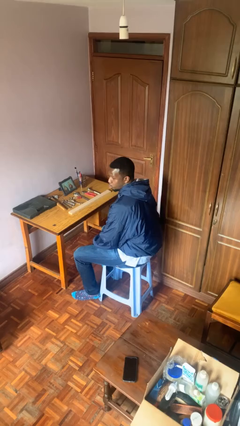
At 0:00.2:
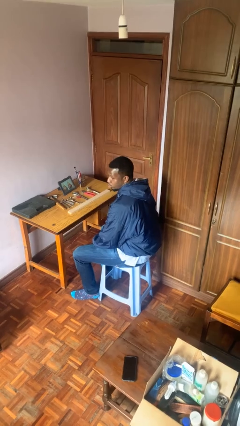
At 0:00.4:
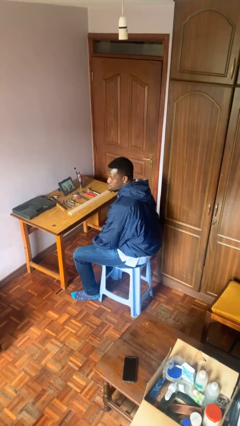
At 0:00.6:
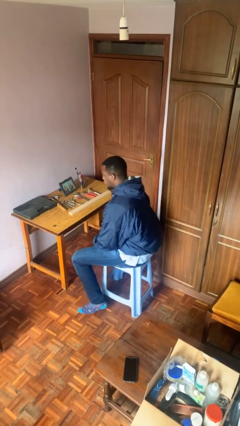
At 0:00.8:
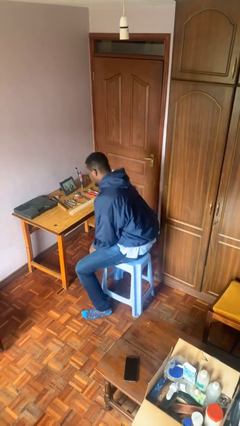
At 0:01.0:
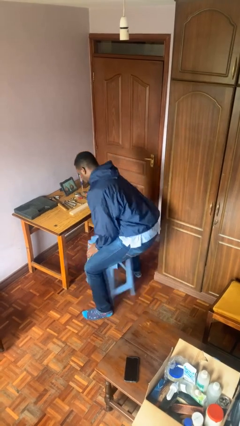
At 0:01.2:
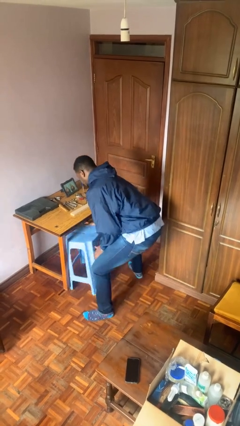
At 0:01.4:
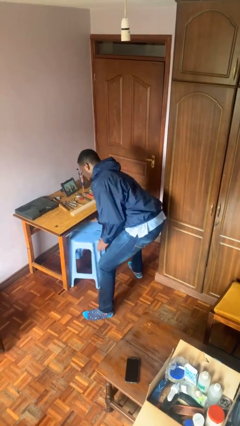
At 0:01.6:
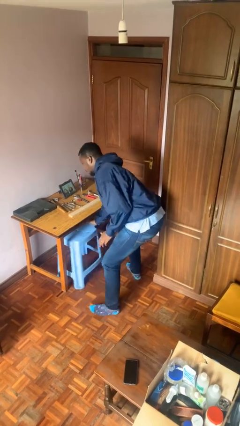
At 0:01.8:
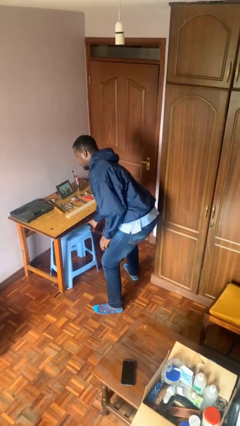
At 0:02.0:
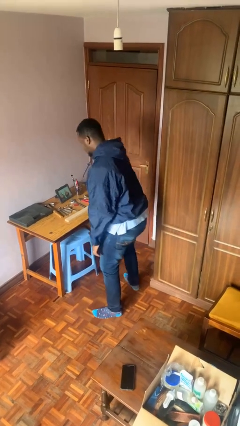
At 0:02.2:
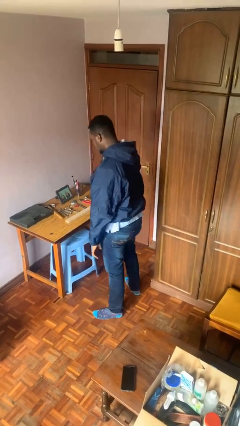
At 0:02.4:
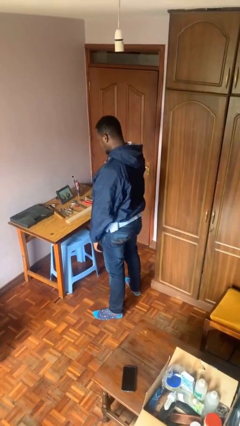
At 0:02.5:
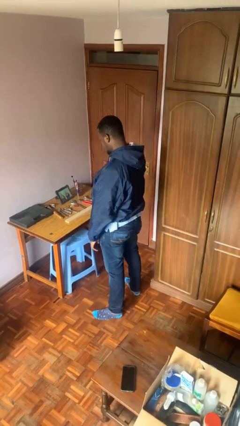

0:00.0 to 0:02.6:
person stands up

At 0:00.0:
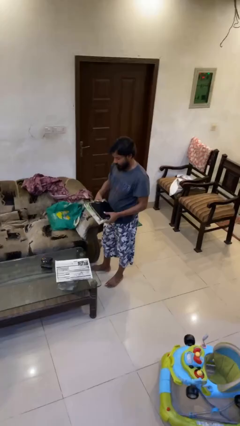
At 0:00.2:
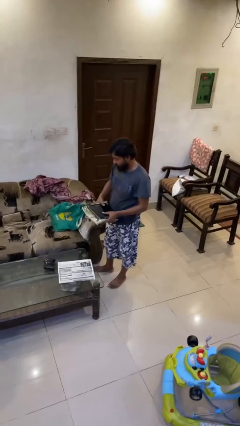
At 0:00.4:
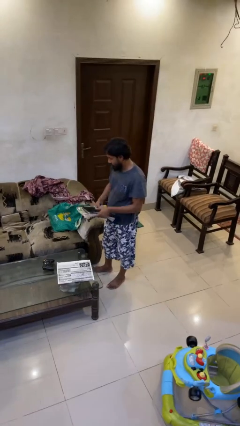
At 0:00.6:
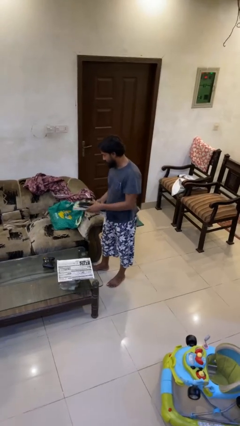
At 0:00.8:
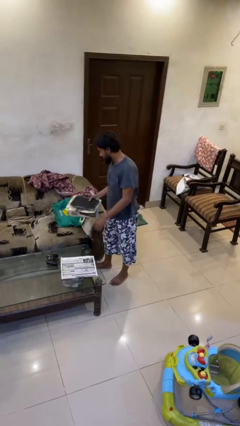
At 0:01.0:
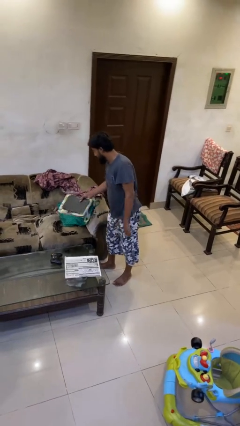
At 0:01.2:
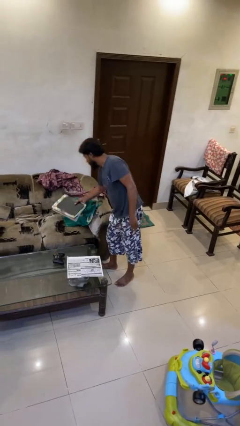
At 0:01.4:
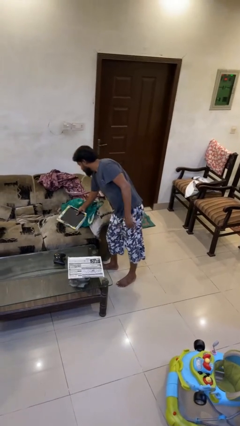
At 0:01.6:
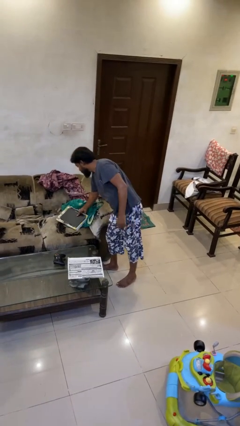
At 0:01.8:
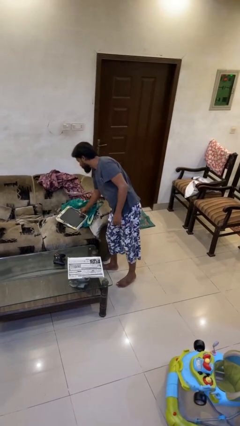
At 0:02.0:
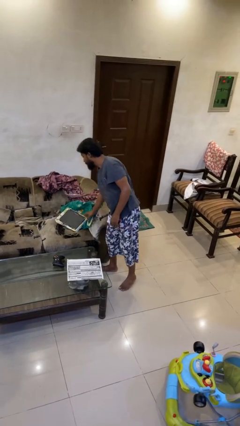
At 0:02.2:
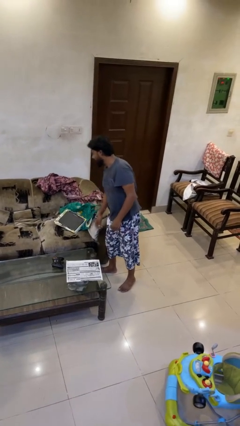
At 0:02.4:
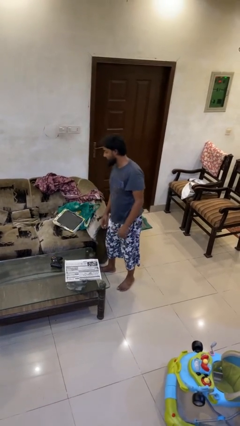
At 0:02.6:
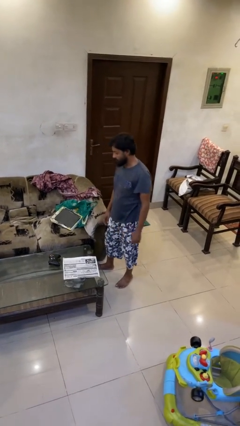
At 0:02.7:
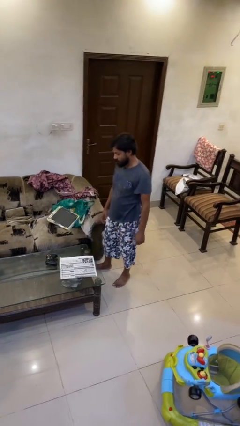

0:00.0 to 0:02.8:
person puts down object on couch

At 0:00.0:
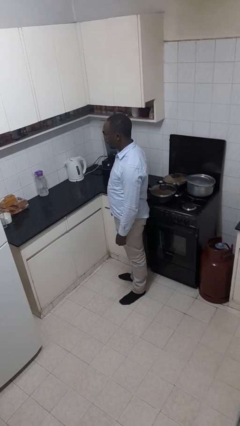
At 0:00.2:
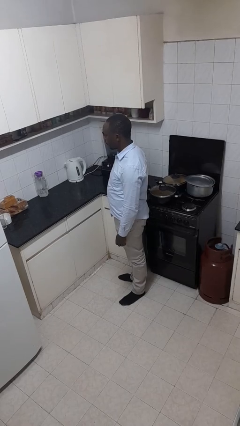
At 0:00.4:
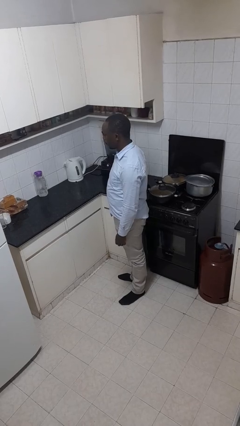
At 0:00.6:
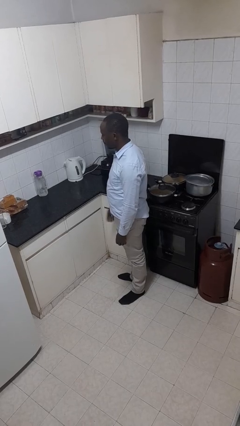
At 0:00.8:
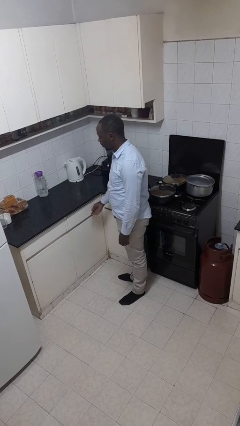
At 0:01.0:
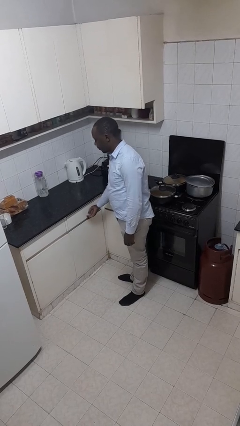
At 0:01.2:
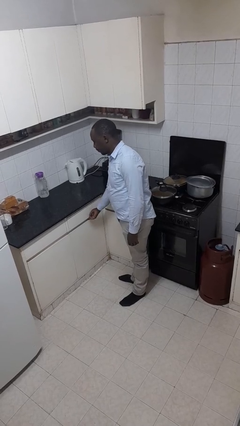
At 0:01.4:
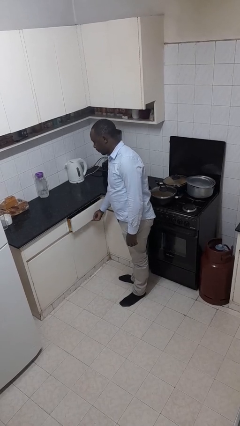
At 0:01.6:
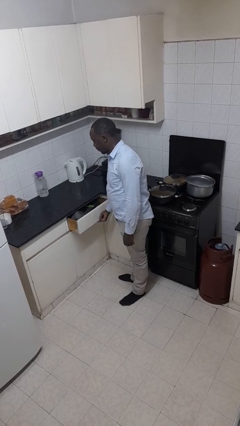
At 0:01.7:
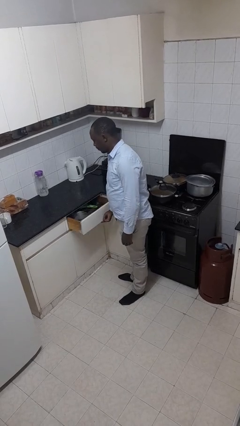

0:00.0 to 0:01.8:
person opens kitchen drawer

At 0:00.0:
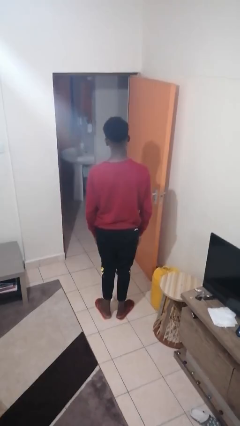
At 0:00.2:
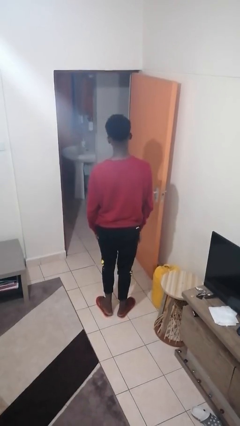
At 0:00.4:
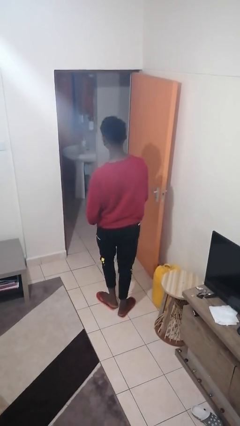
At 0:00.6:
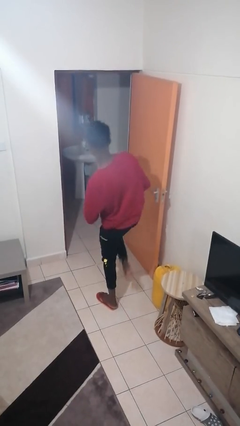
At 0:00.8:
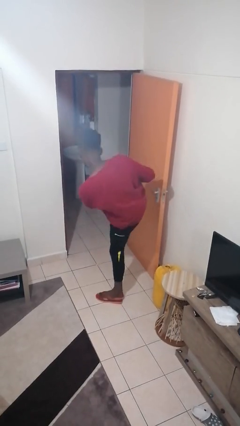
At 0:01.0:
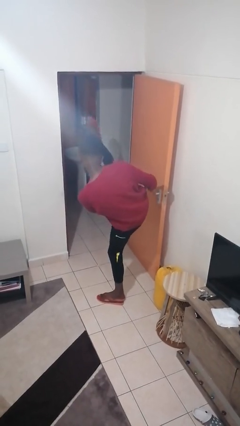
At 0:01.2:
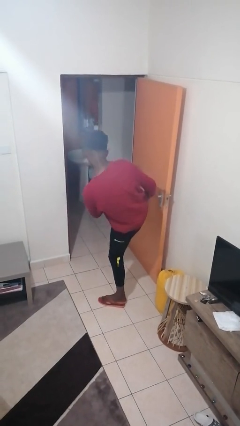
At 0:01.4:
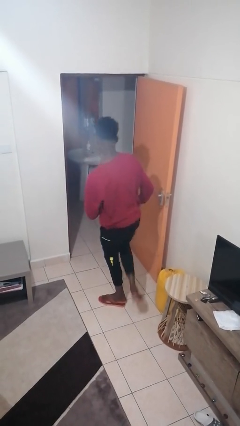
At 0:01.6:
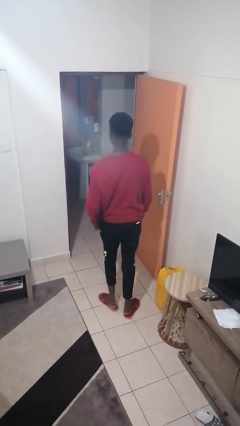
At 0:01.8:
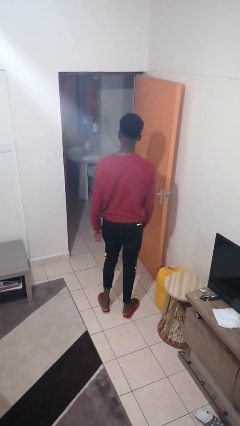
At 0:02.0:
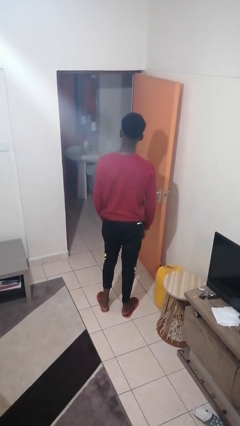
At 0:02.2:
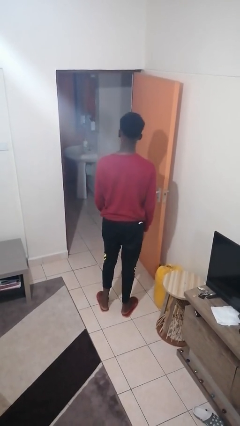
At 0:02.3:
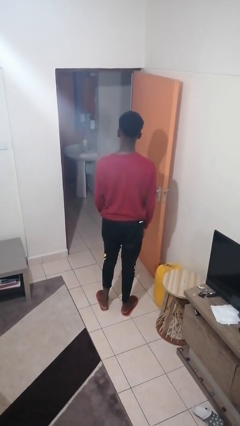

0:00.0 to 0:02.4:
person karate kicks

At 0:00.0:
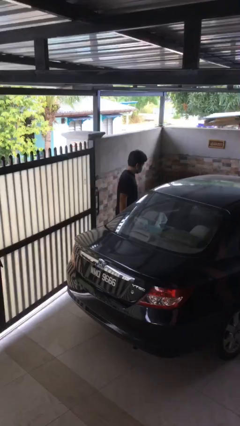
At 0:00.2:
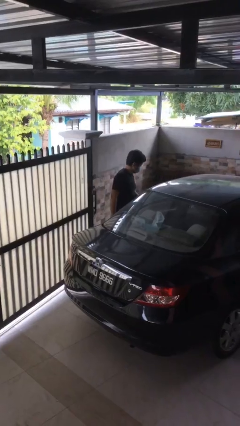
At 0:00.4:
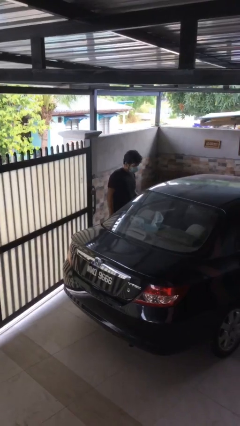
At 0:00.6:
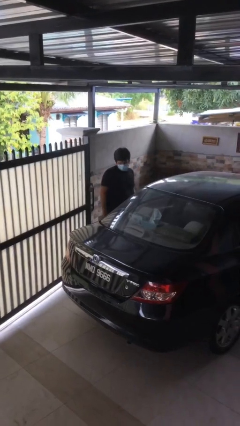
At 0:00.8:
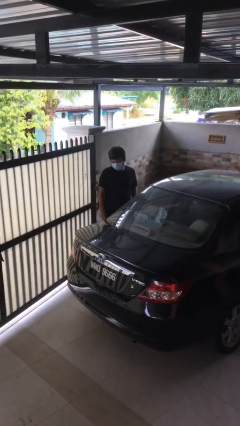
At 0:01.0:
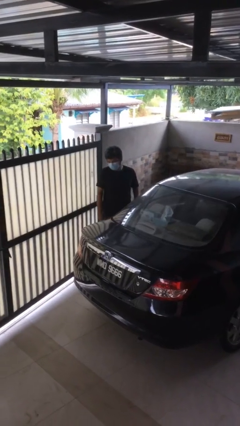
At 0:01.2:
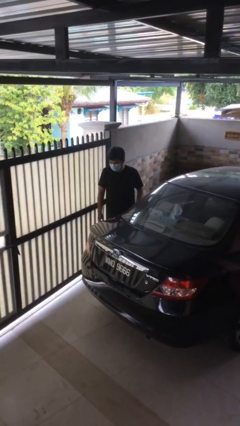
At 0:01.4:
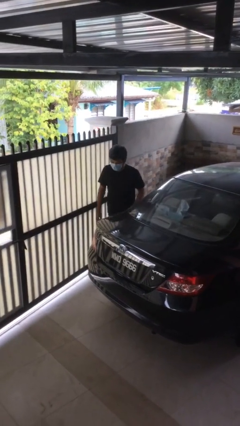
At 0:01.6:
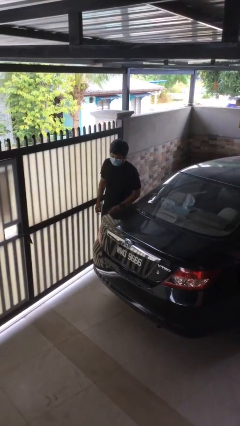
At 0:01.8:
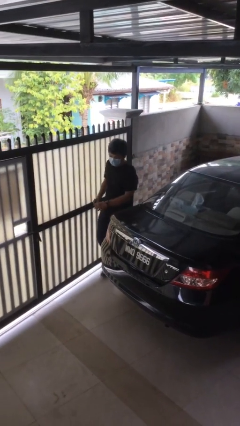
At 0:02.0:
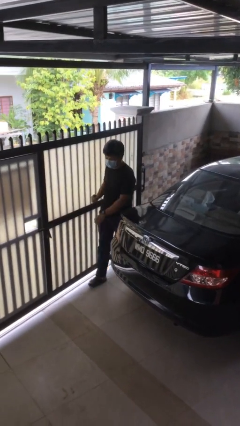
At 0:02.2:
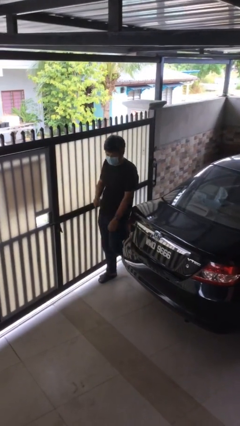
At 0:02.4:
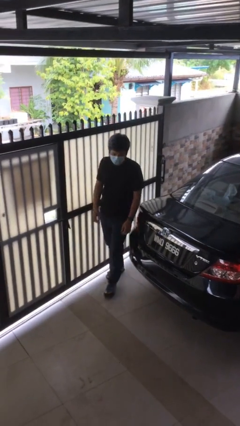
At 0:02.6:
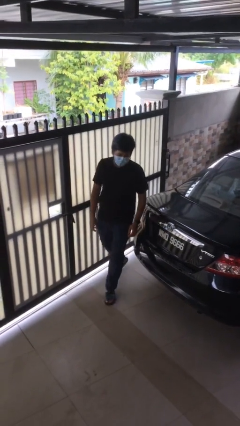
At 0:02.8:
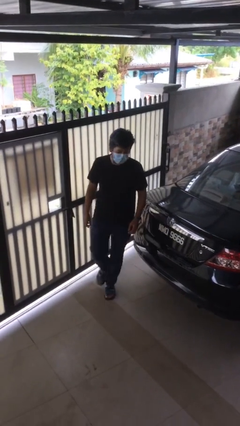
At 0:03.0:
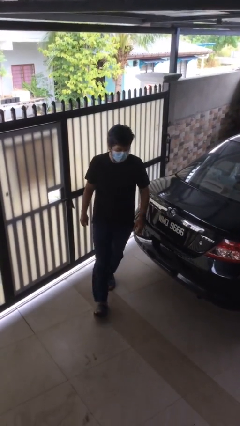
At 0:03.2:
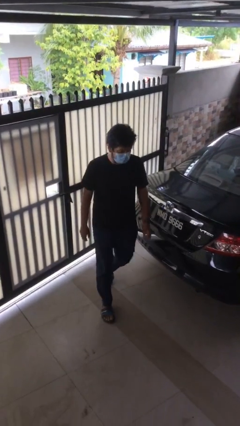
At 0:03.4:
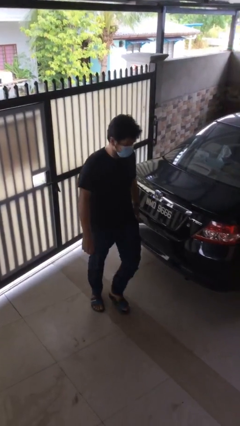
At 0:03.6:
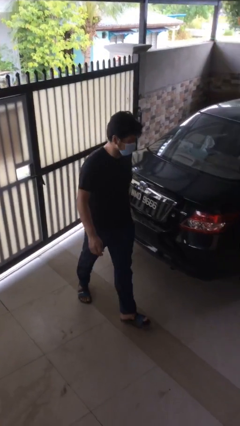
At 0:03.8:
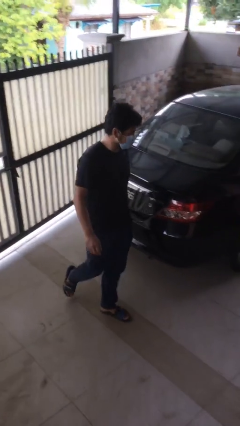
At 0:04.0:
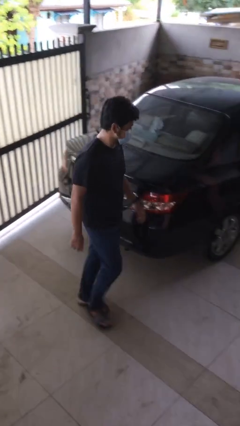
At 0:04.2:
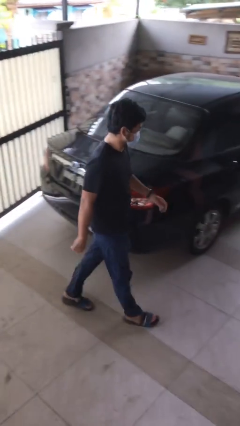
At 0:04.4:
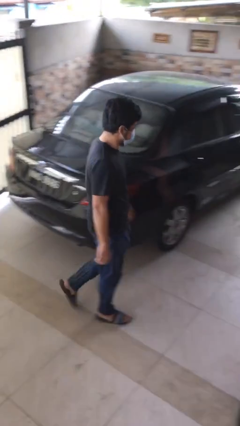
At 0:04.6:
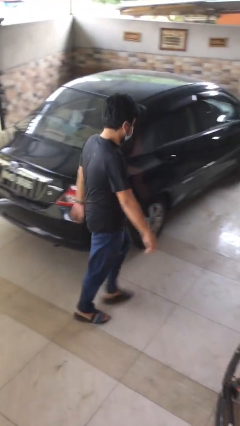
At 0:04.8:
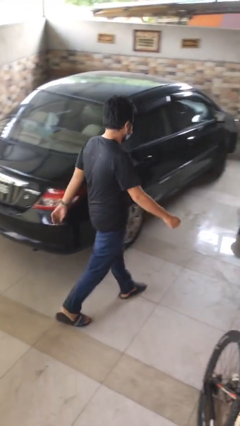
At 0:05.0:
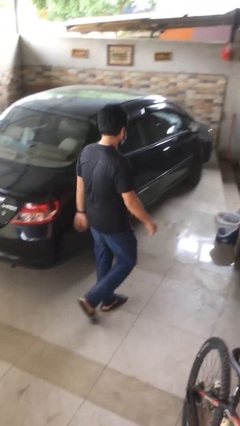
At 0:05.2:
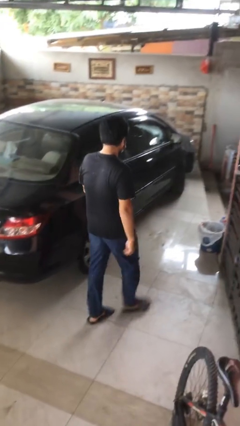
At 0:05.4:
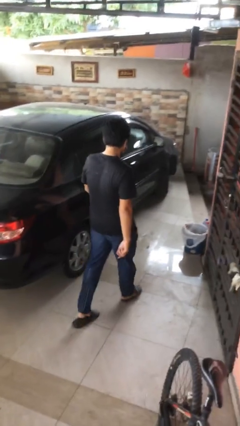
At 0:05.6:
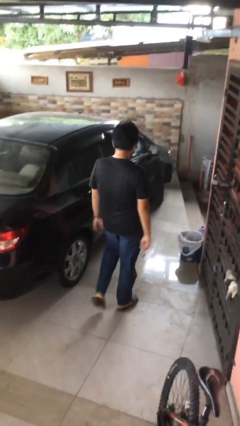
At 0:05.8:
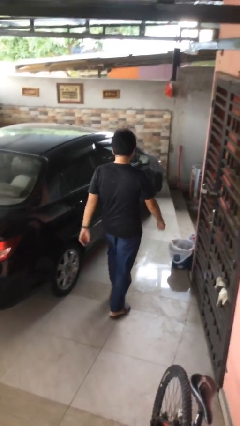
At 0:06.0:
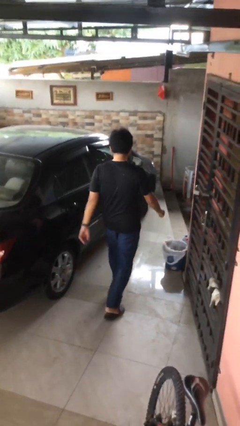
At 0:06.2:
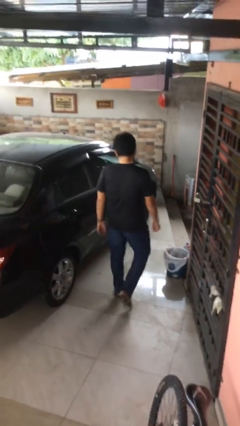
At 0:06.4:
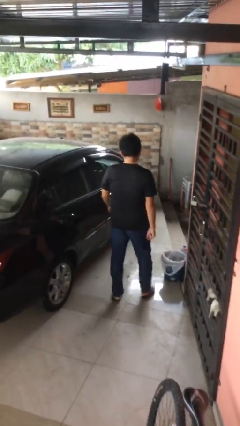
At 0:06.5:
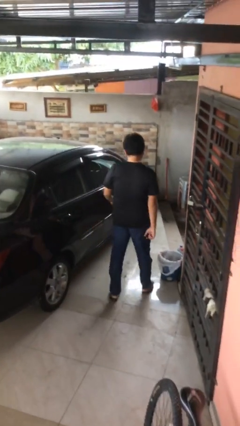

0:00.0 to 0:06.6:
person walks around car

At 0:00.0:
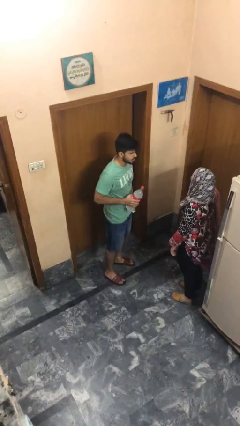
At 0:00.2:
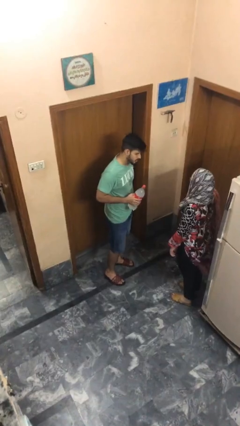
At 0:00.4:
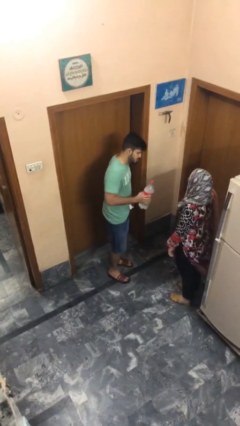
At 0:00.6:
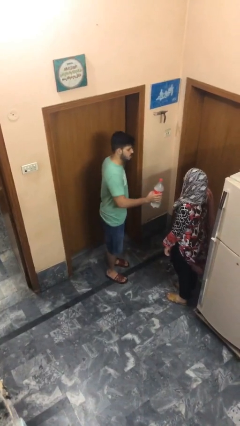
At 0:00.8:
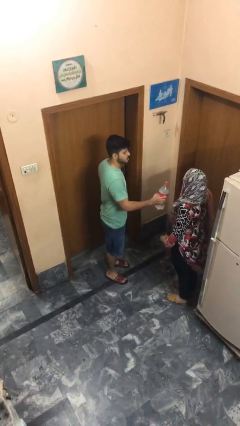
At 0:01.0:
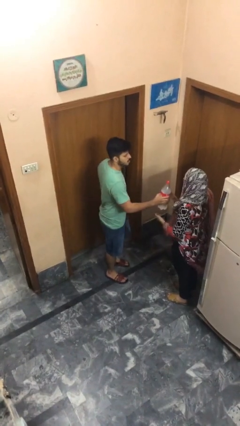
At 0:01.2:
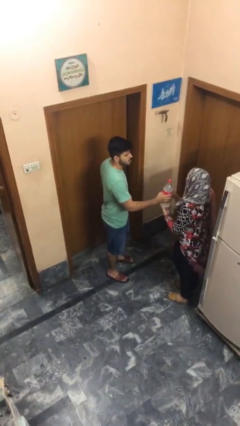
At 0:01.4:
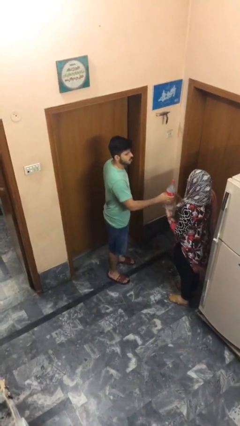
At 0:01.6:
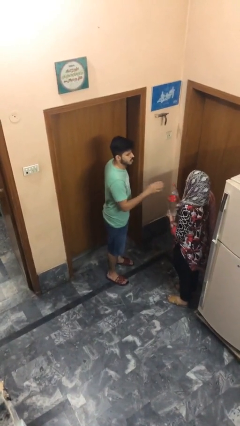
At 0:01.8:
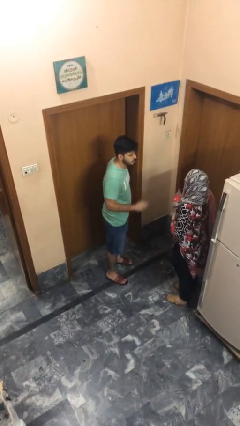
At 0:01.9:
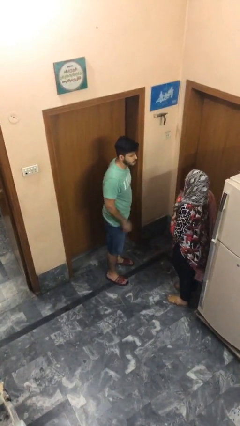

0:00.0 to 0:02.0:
person transfers object to person
